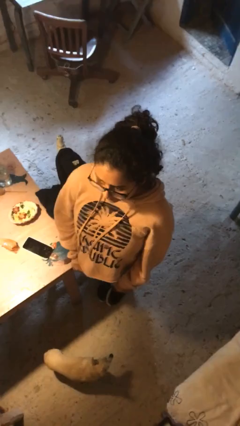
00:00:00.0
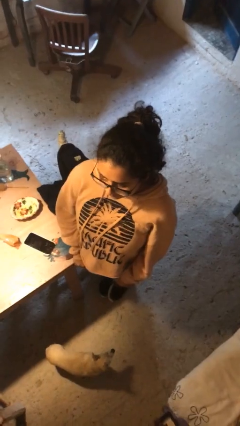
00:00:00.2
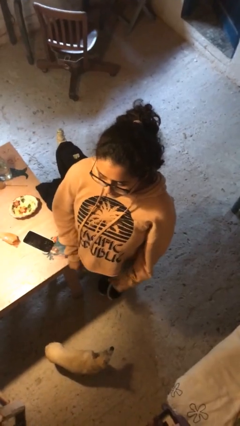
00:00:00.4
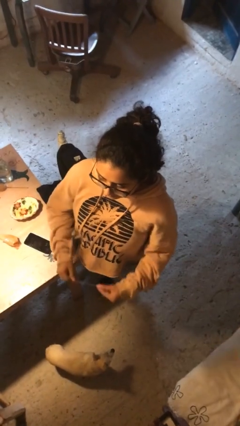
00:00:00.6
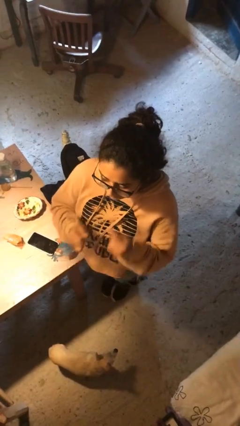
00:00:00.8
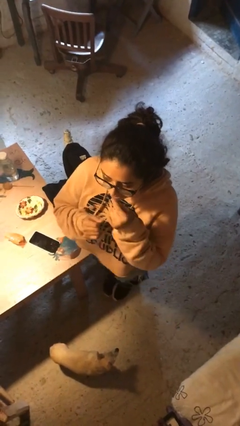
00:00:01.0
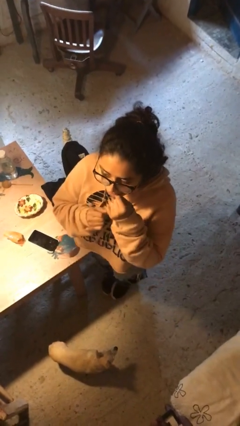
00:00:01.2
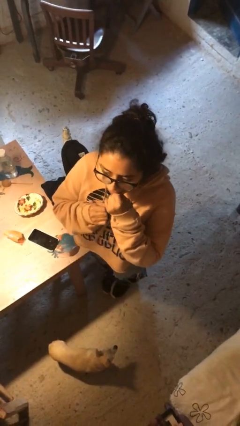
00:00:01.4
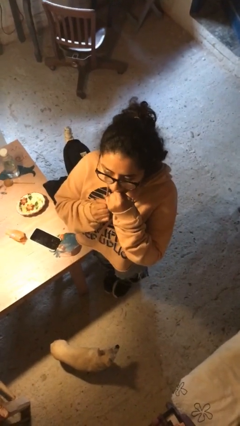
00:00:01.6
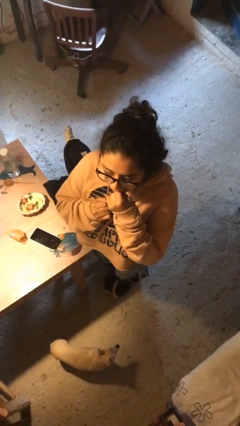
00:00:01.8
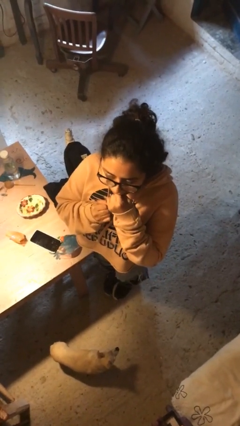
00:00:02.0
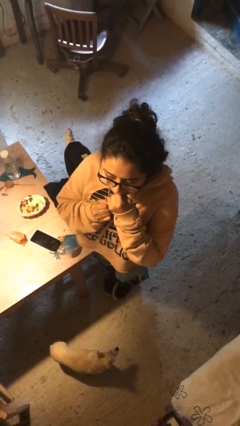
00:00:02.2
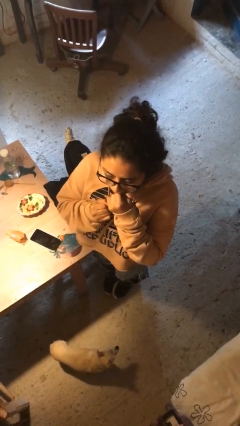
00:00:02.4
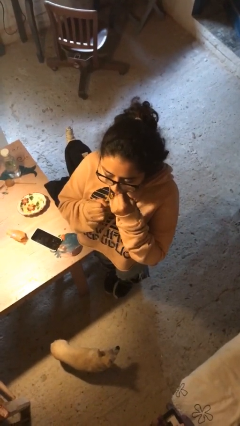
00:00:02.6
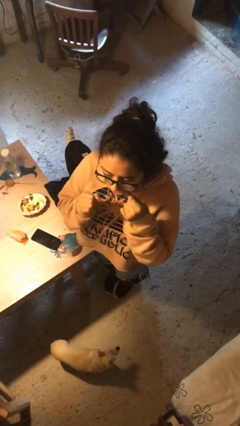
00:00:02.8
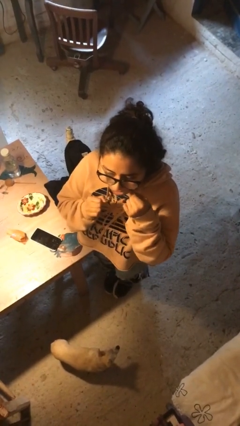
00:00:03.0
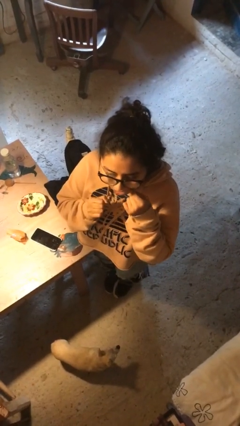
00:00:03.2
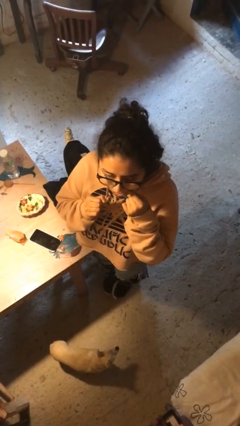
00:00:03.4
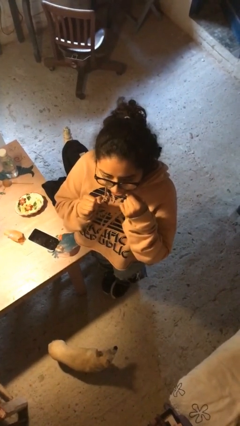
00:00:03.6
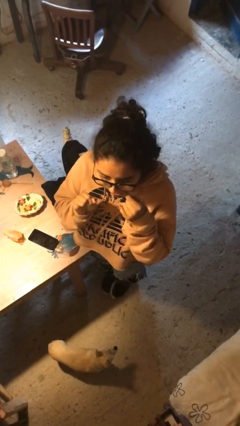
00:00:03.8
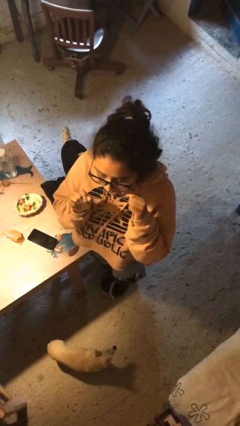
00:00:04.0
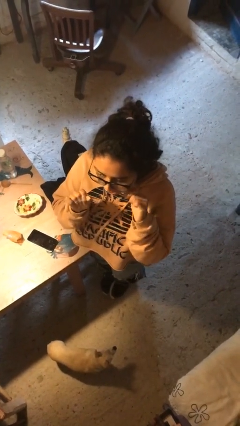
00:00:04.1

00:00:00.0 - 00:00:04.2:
person flosses

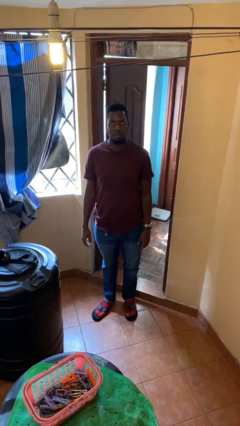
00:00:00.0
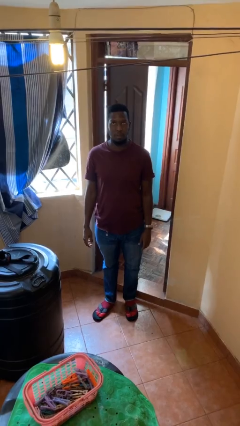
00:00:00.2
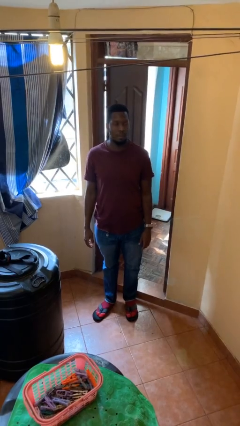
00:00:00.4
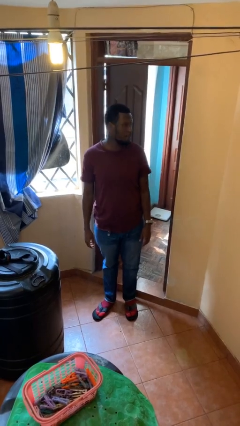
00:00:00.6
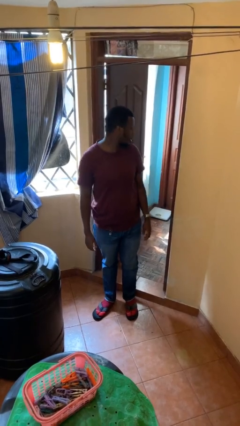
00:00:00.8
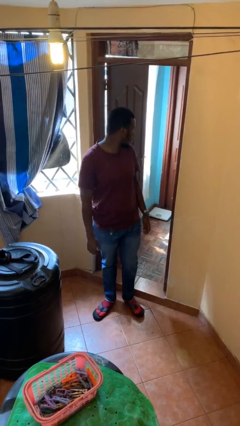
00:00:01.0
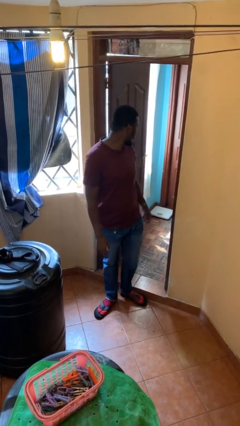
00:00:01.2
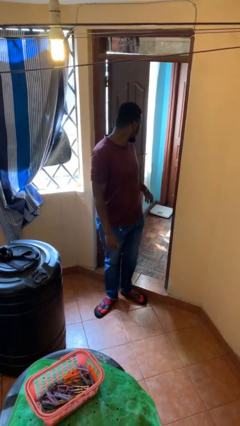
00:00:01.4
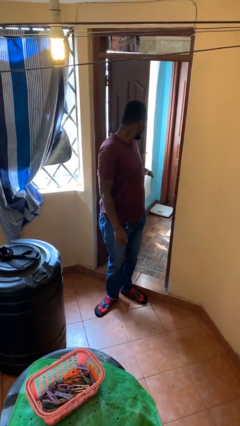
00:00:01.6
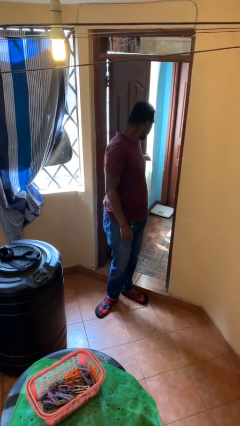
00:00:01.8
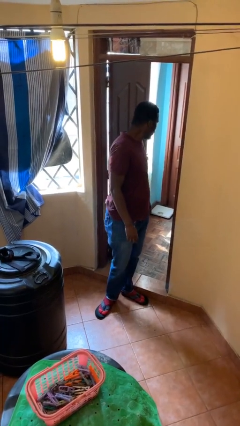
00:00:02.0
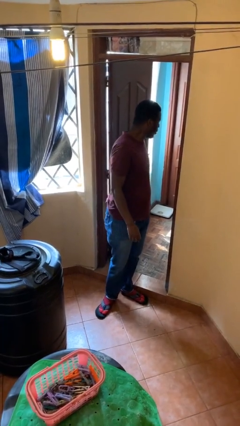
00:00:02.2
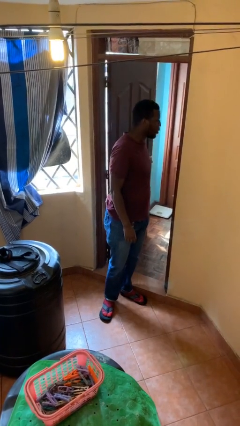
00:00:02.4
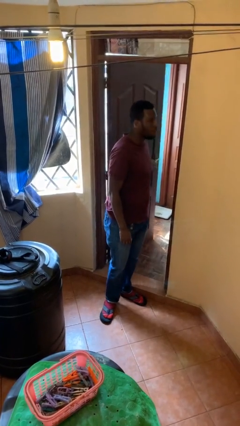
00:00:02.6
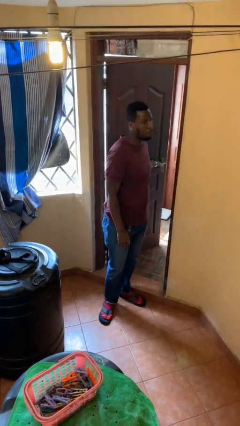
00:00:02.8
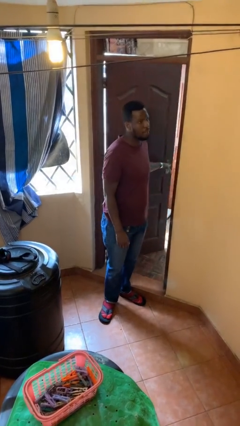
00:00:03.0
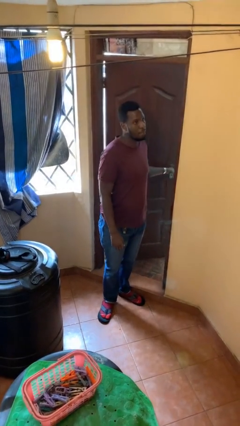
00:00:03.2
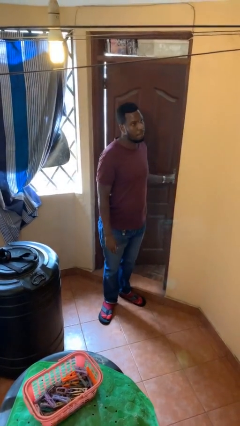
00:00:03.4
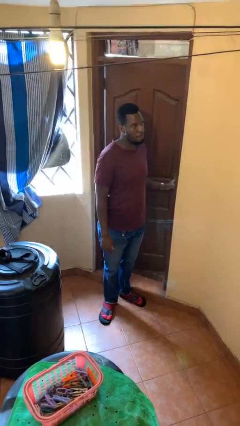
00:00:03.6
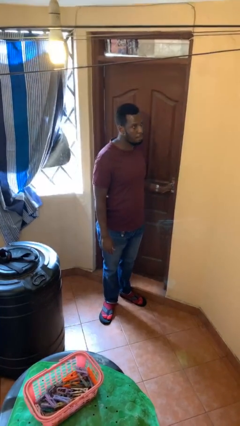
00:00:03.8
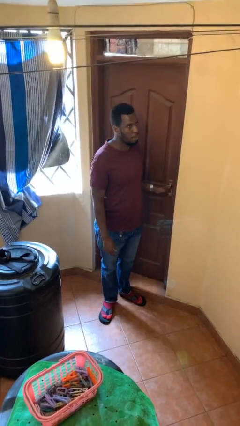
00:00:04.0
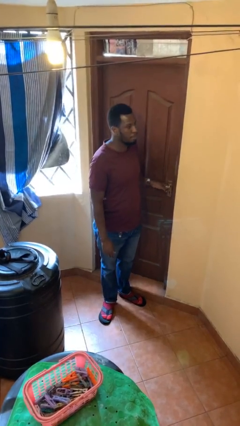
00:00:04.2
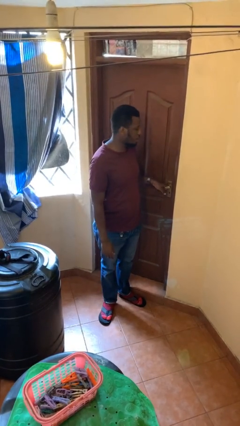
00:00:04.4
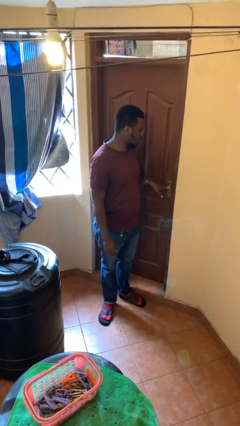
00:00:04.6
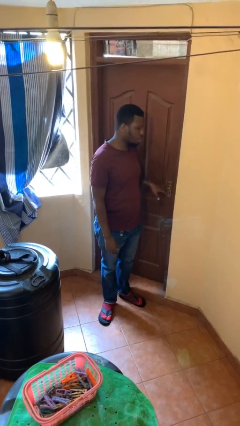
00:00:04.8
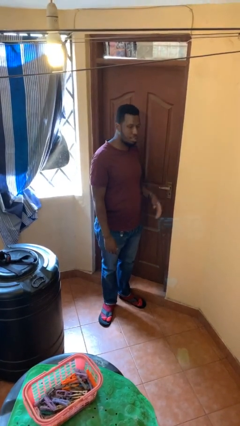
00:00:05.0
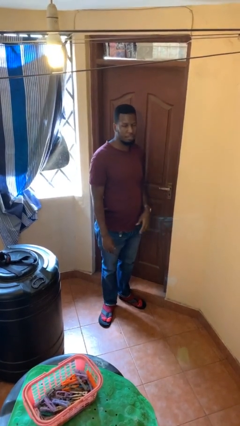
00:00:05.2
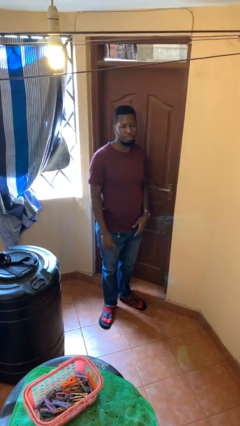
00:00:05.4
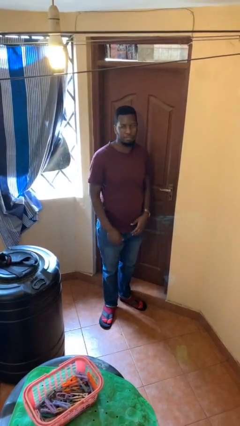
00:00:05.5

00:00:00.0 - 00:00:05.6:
person closes facility door

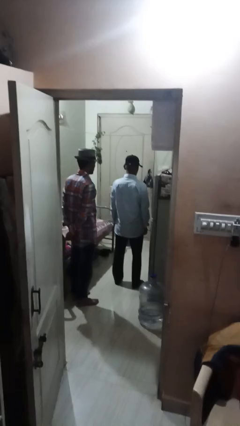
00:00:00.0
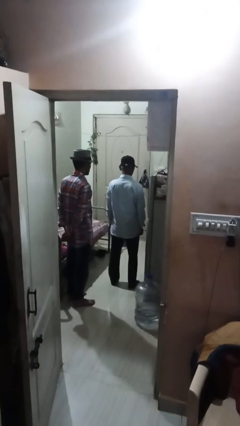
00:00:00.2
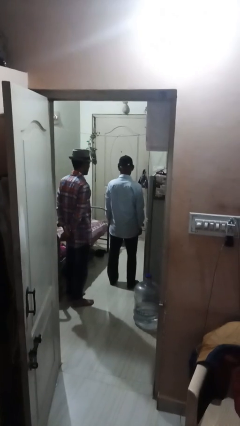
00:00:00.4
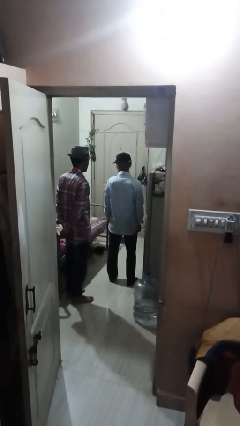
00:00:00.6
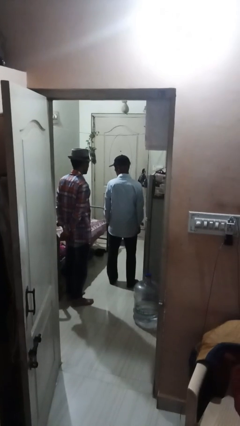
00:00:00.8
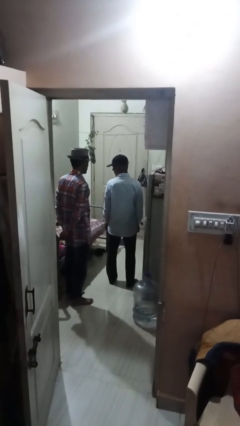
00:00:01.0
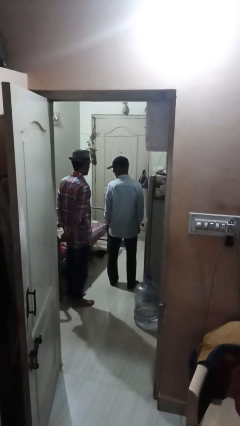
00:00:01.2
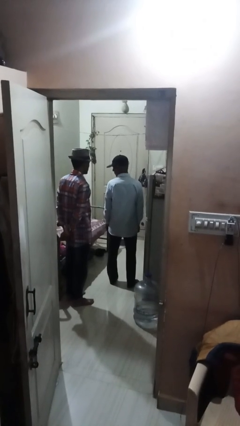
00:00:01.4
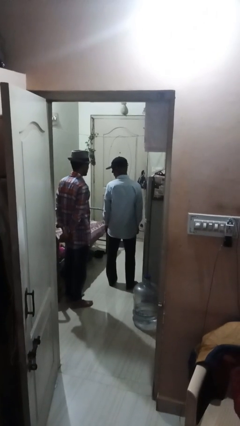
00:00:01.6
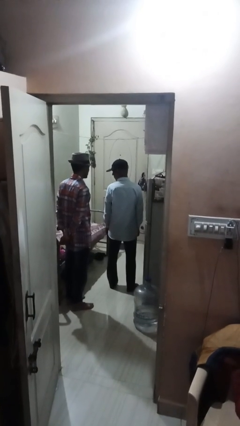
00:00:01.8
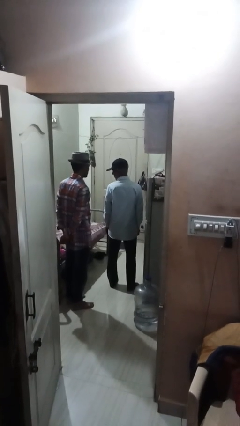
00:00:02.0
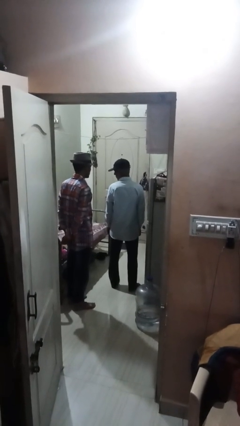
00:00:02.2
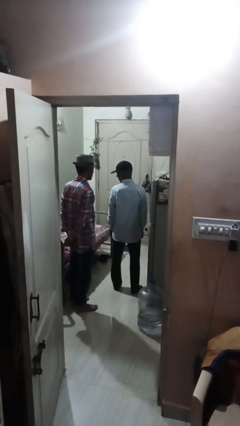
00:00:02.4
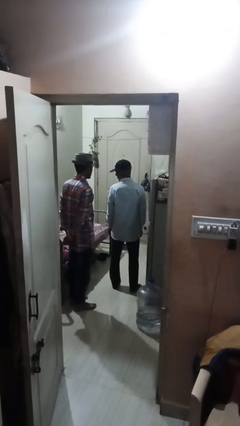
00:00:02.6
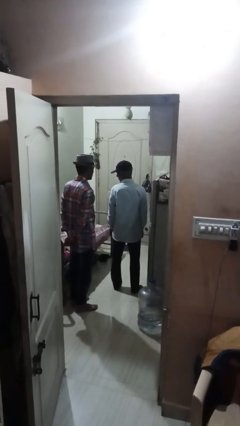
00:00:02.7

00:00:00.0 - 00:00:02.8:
person looks over shoulder

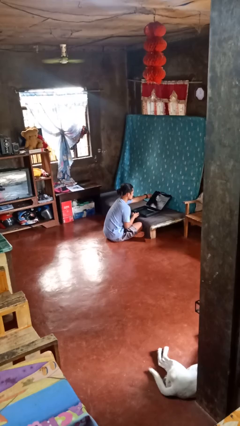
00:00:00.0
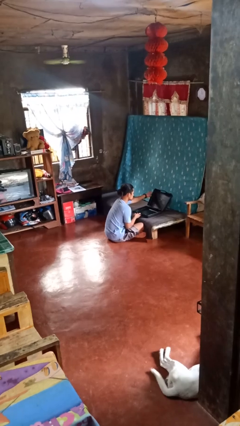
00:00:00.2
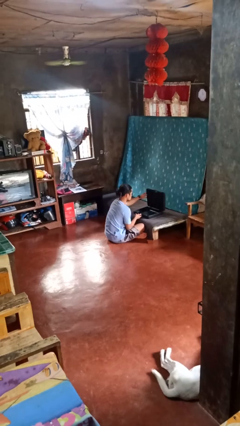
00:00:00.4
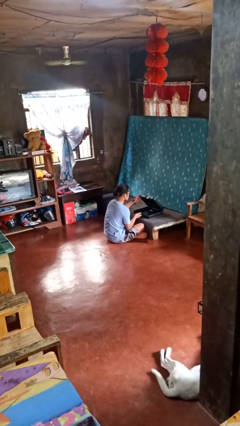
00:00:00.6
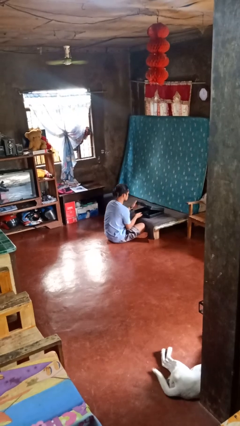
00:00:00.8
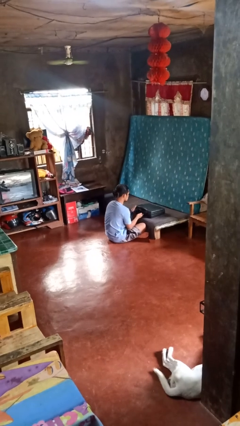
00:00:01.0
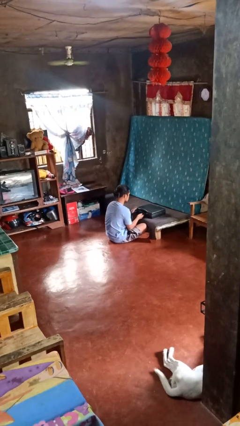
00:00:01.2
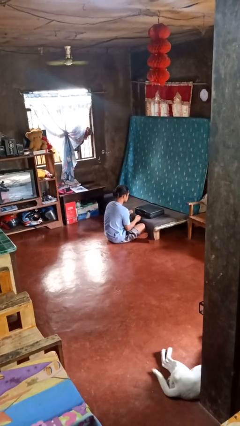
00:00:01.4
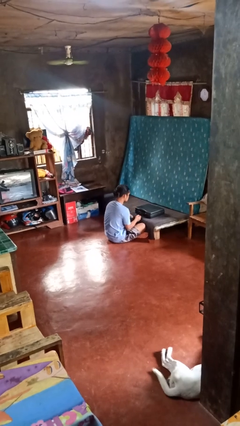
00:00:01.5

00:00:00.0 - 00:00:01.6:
person closes suitcase

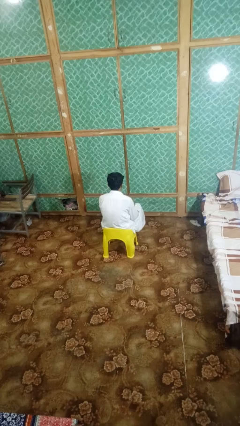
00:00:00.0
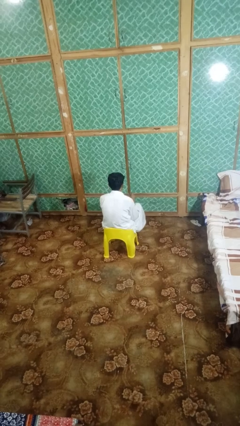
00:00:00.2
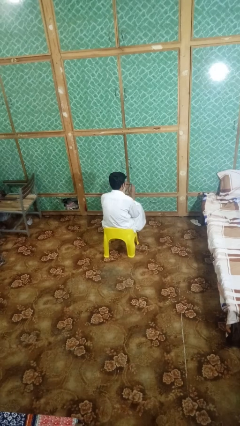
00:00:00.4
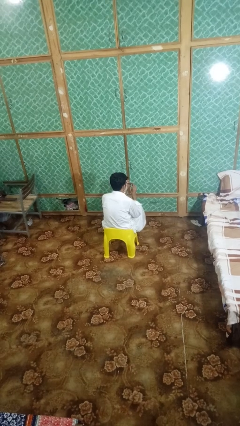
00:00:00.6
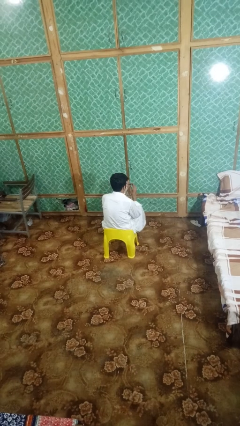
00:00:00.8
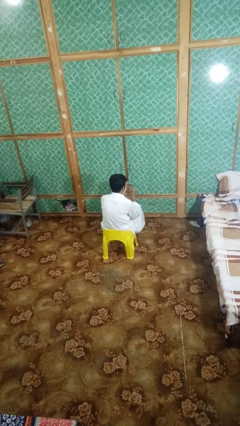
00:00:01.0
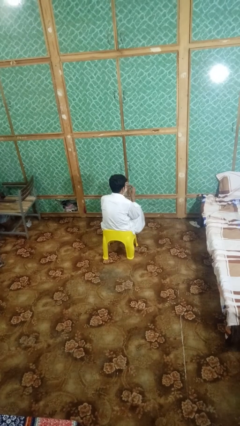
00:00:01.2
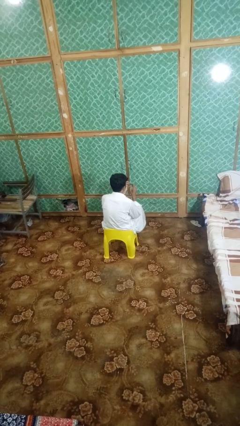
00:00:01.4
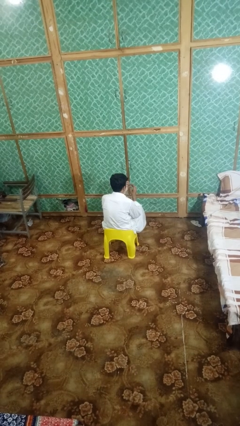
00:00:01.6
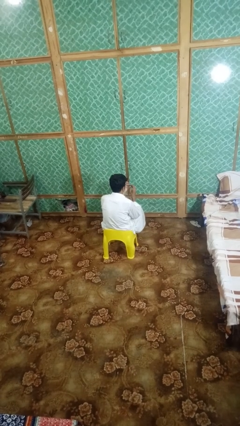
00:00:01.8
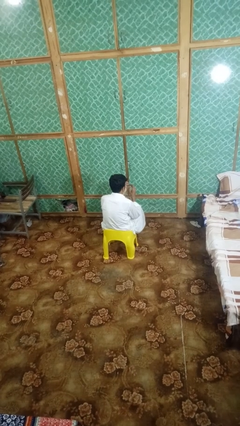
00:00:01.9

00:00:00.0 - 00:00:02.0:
person clips fingernails

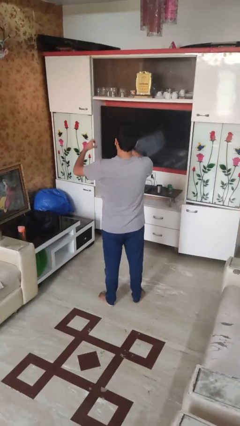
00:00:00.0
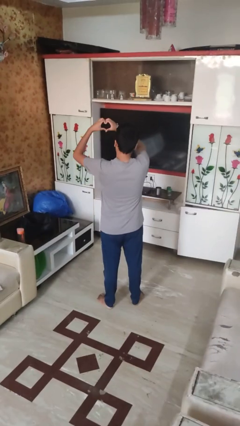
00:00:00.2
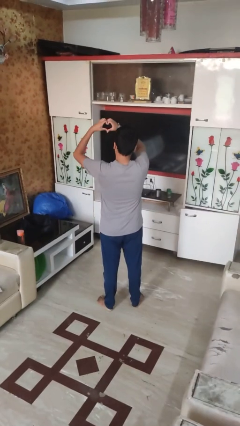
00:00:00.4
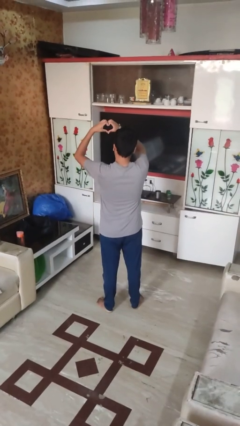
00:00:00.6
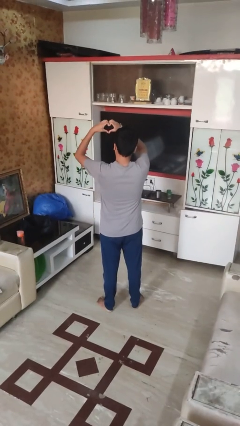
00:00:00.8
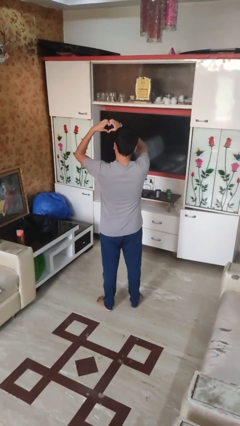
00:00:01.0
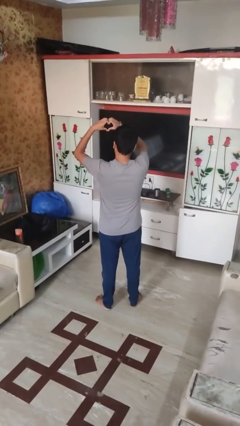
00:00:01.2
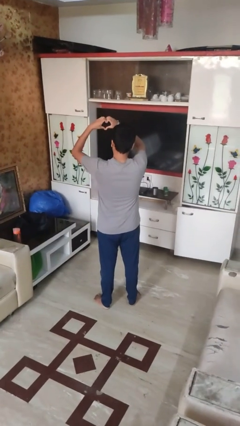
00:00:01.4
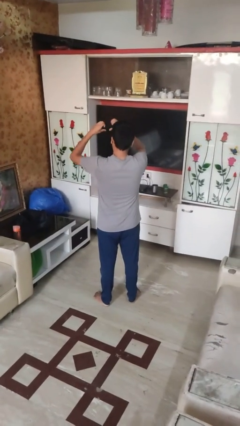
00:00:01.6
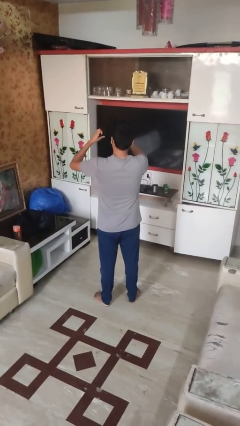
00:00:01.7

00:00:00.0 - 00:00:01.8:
person gestures heart
